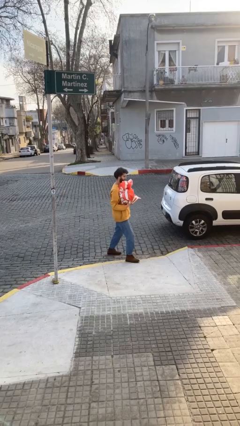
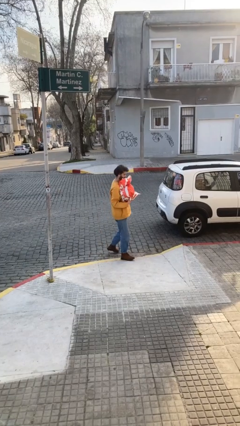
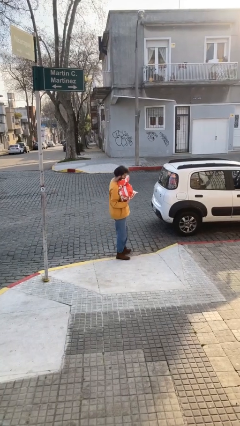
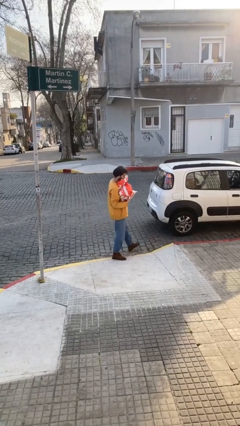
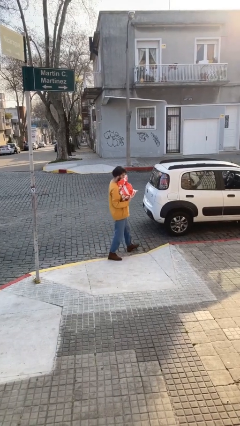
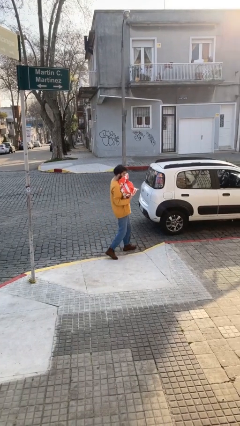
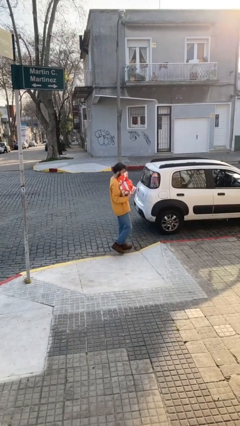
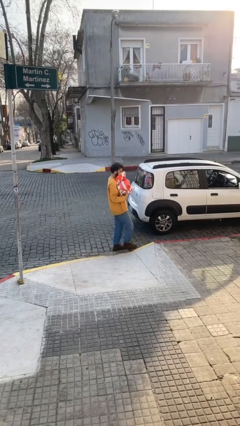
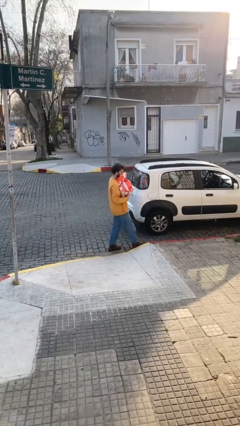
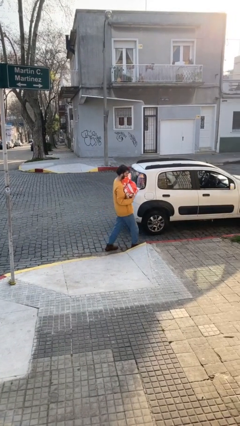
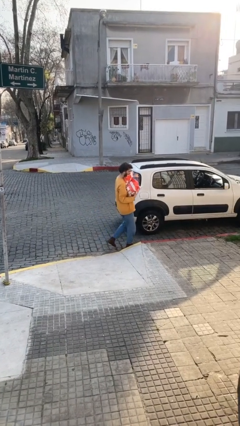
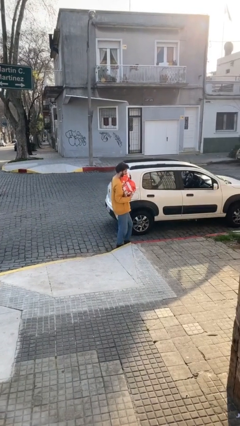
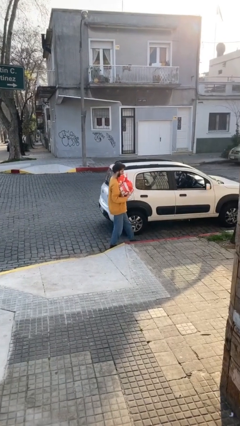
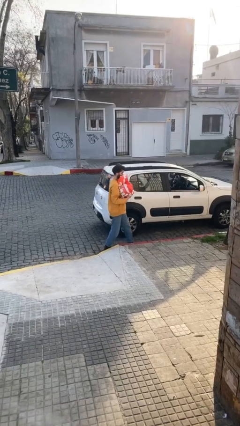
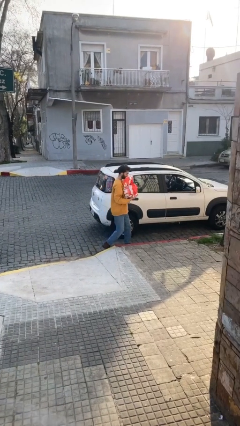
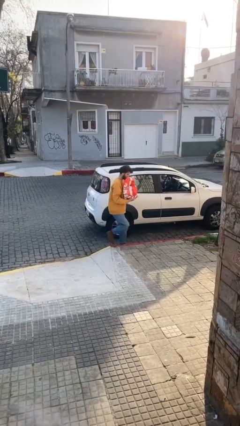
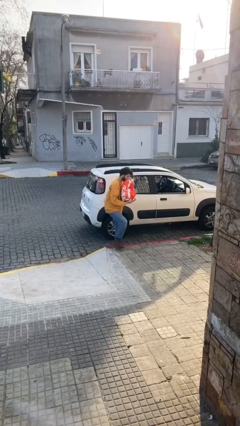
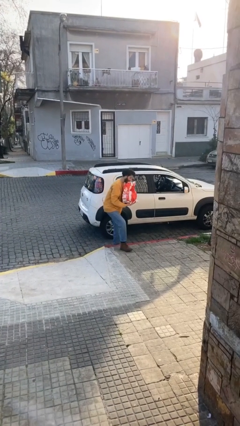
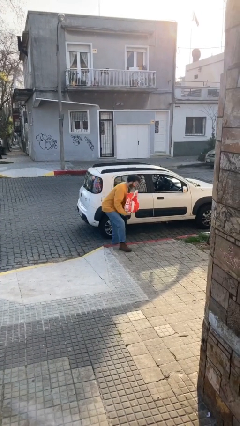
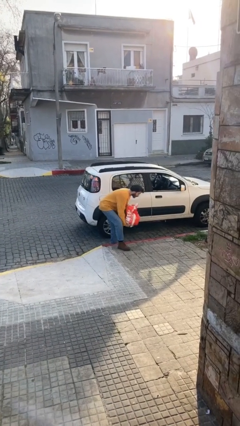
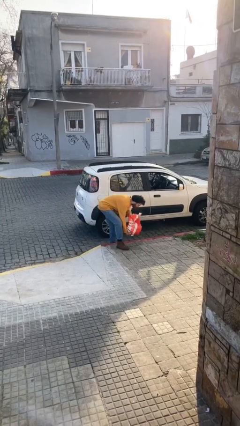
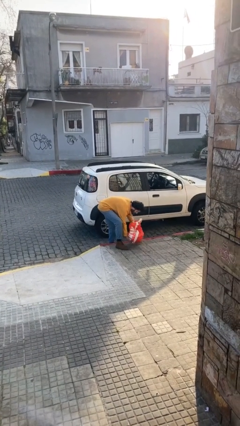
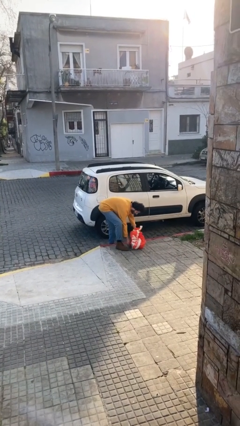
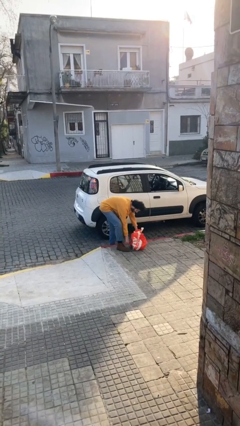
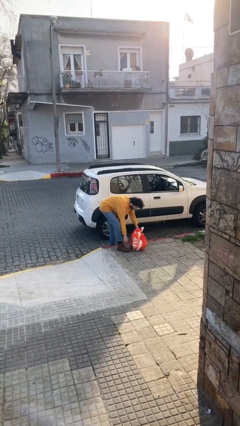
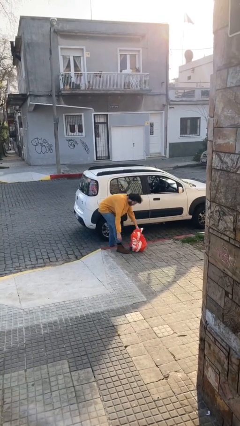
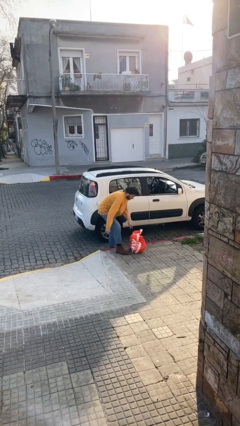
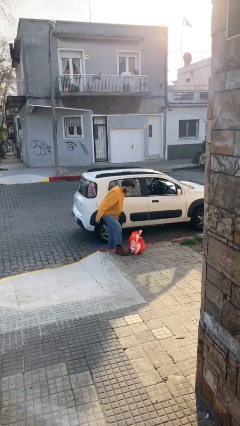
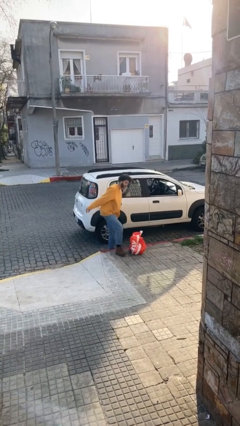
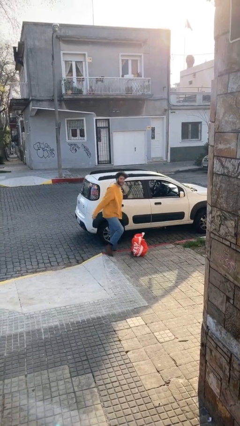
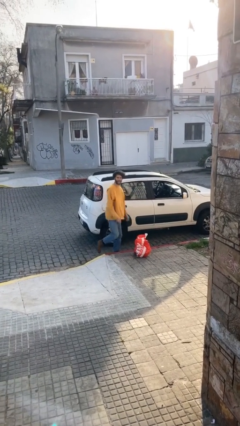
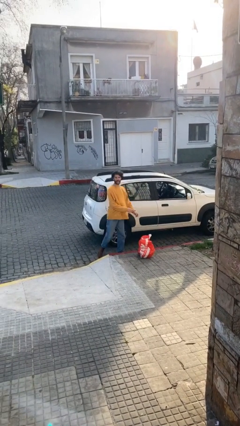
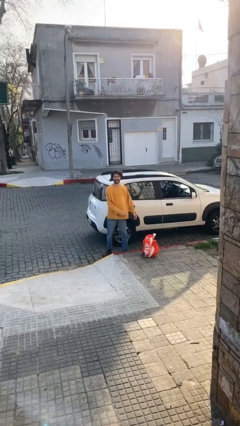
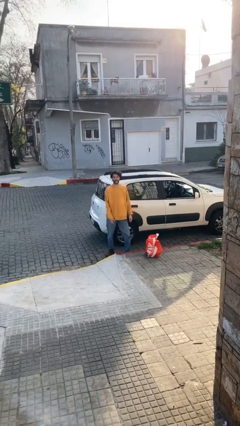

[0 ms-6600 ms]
person puts down object on floor

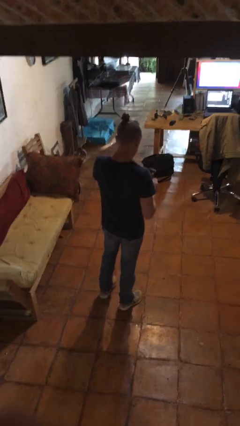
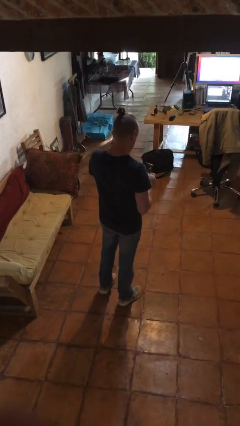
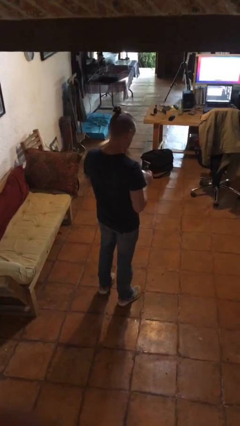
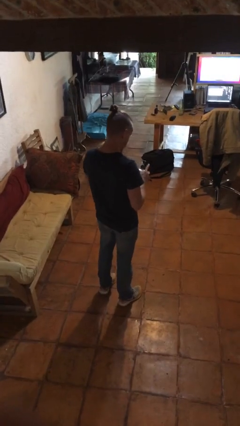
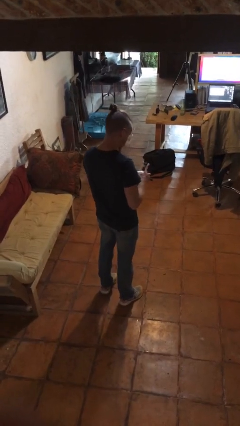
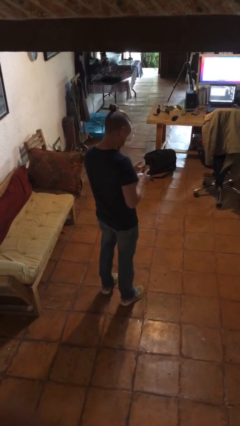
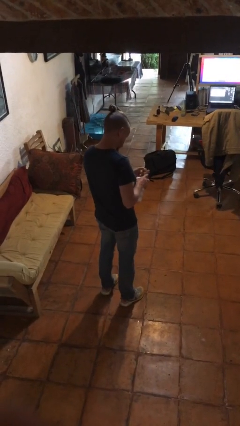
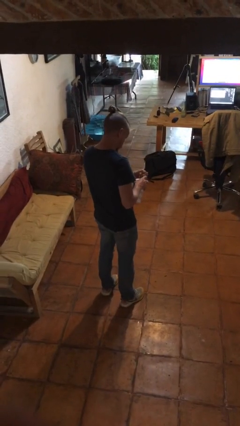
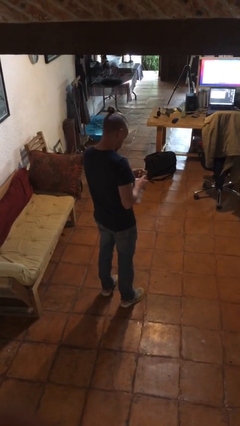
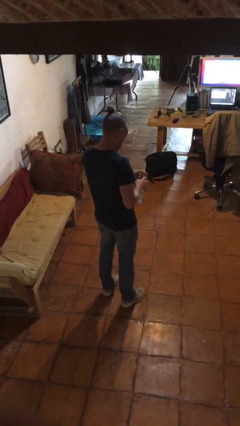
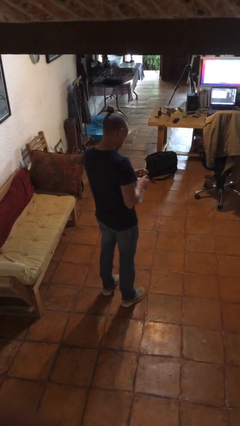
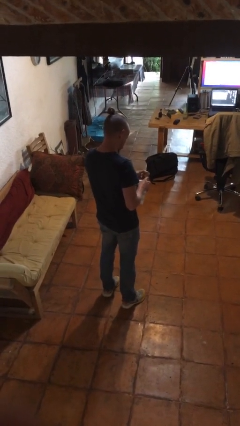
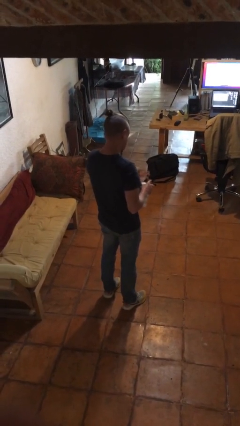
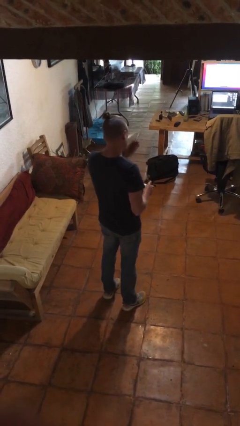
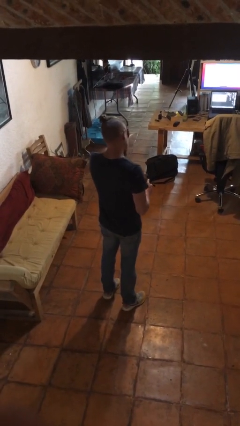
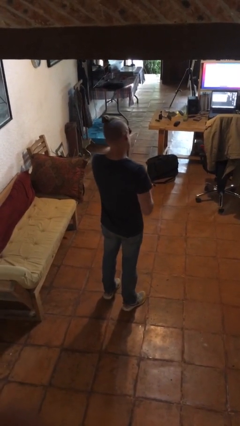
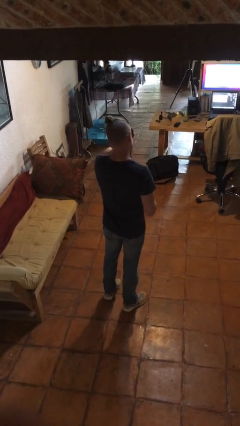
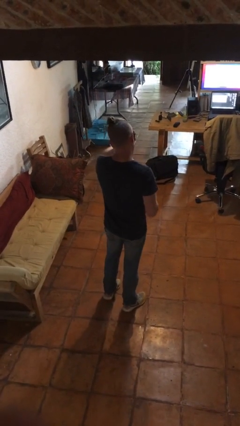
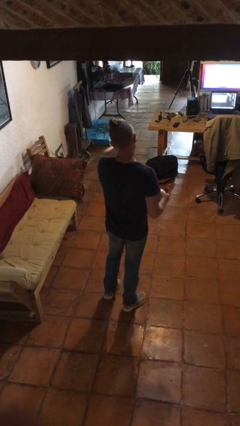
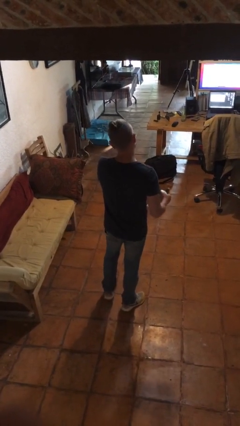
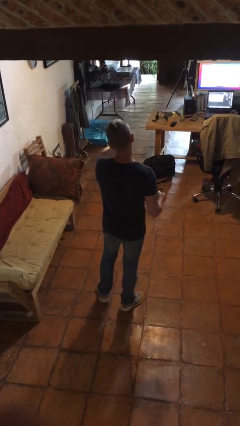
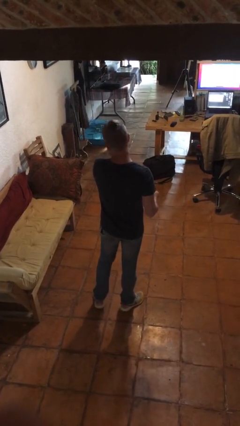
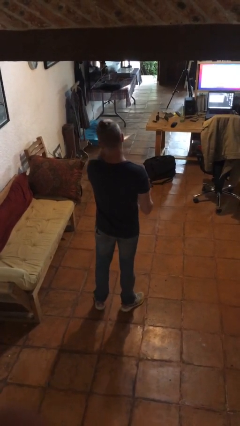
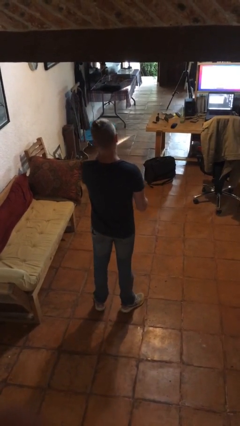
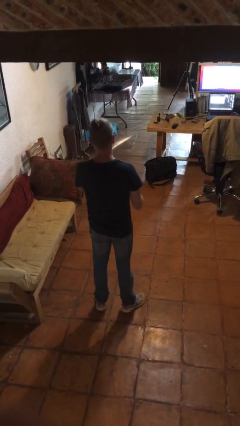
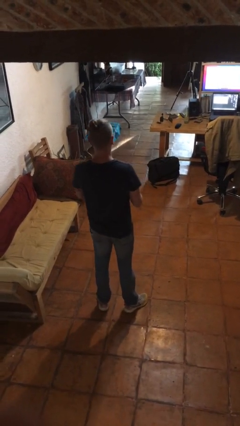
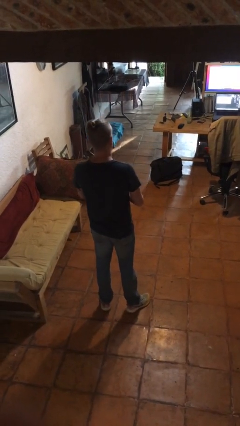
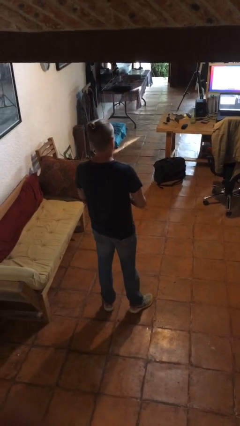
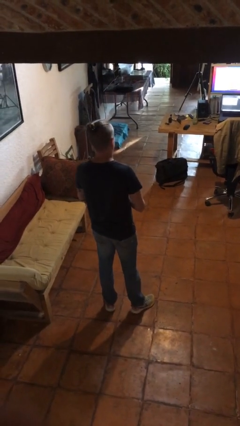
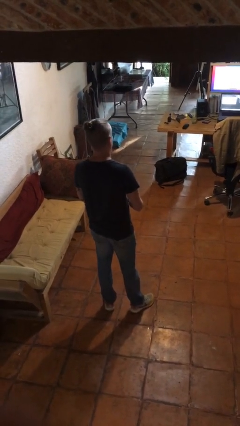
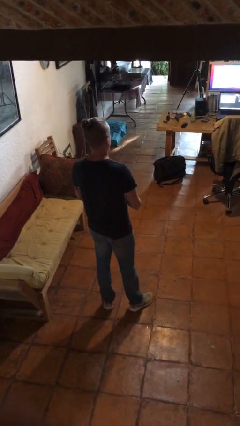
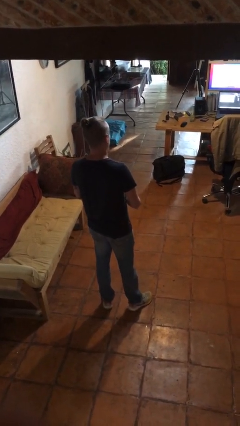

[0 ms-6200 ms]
person applies facial moisturizer

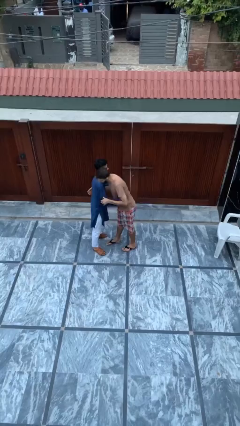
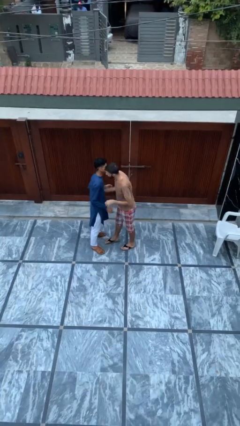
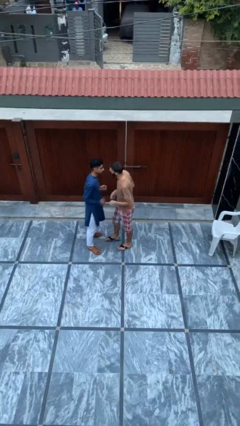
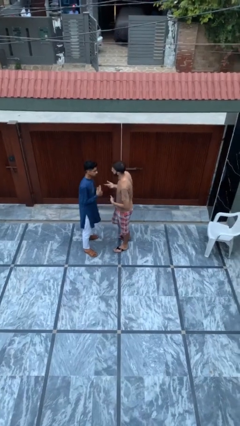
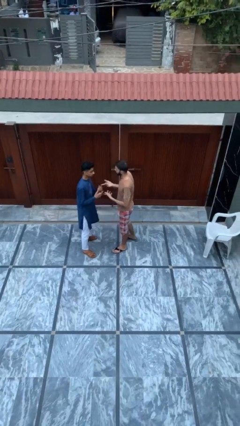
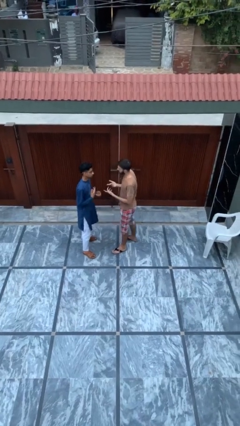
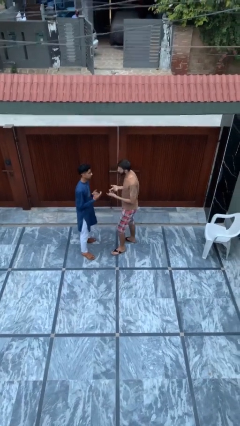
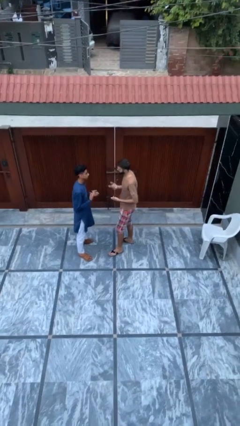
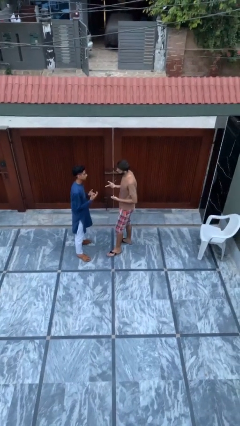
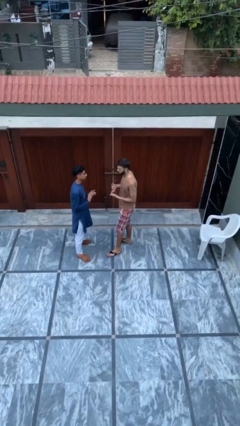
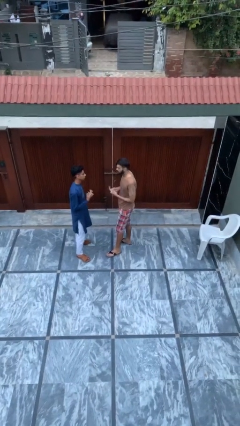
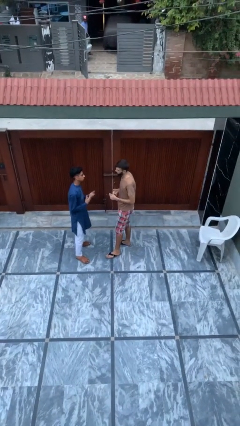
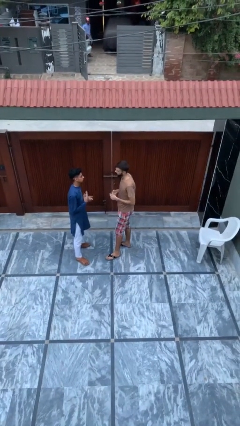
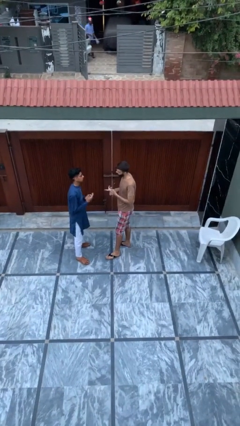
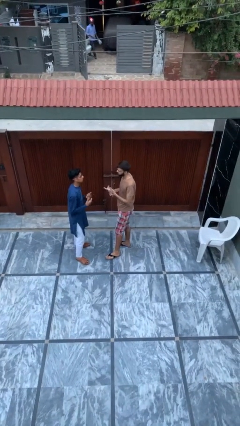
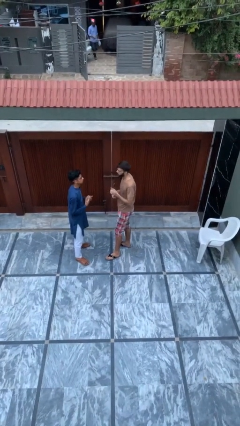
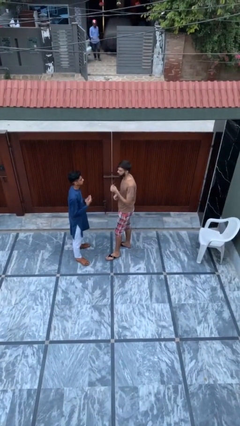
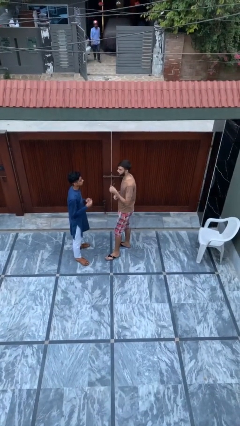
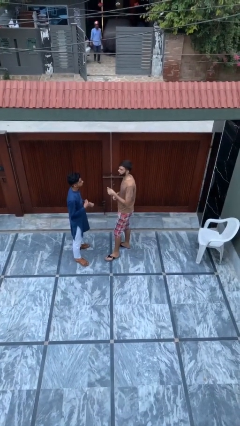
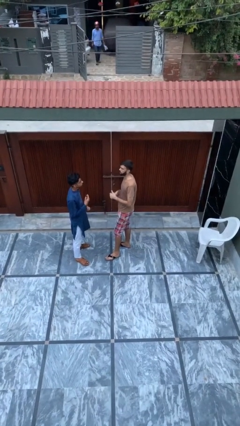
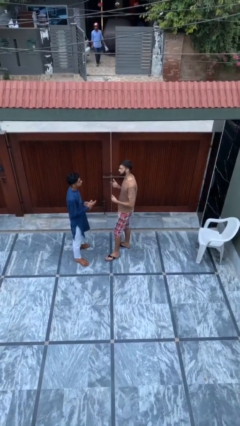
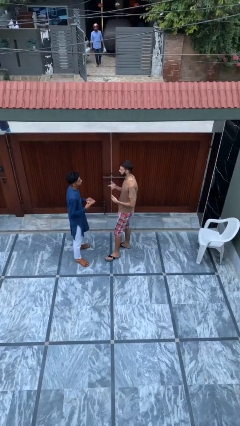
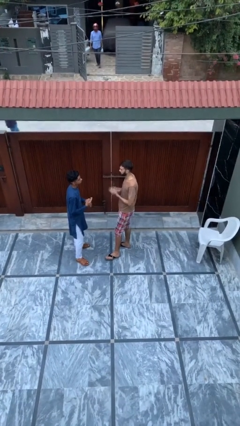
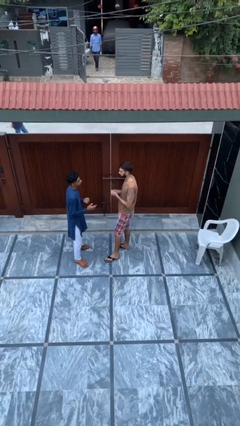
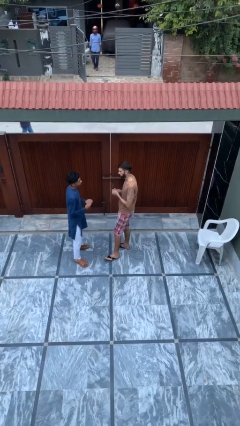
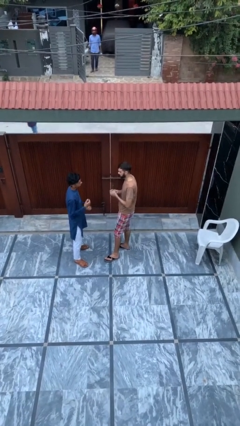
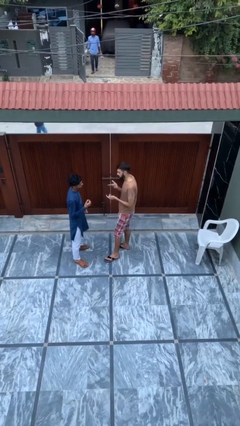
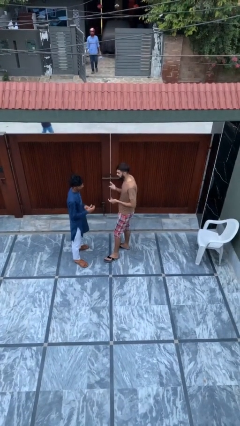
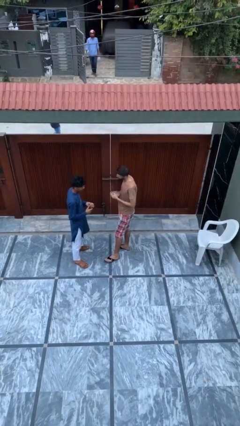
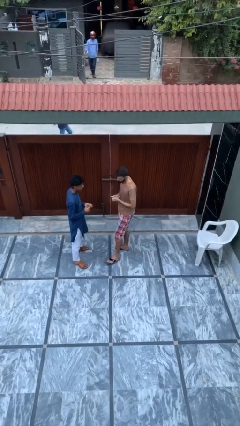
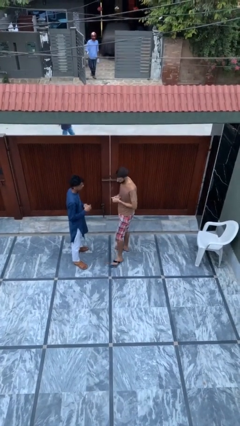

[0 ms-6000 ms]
person talks to person
